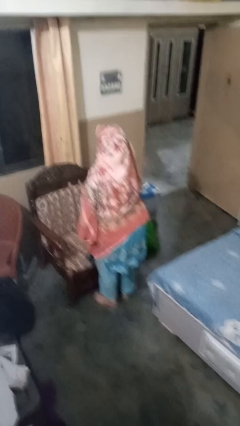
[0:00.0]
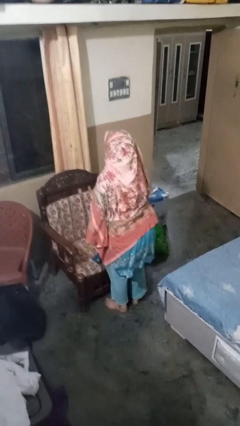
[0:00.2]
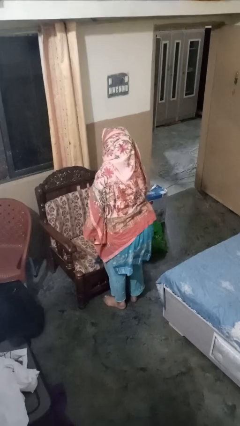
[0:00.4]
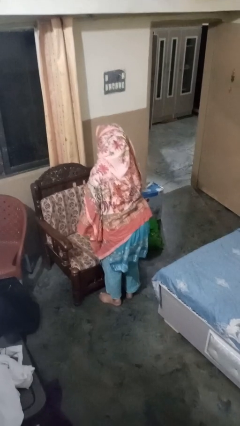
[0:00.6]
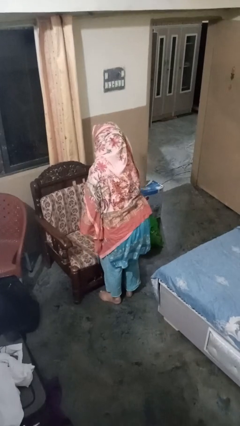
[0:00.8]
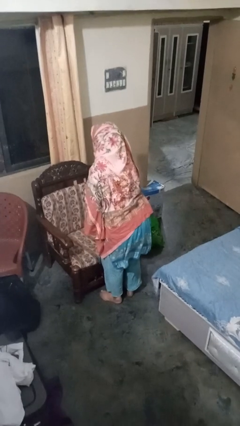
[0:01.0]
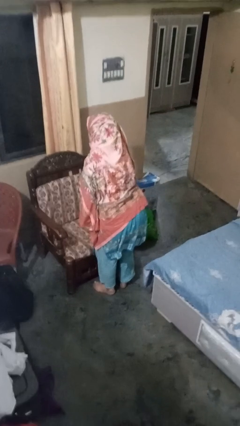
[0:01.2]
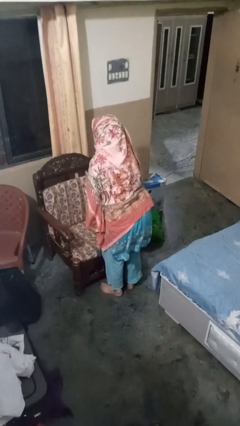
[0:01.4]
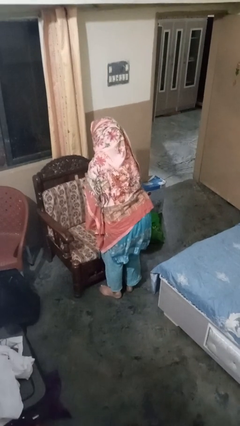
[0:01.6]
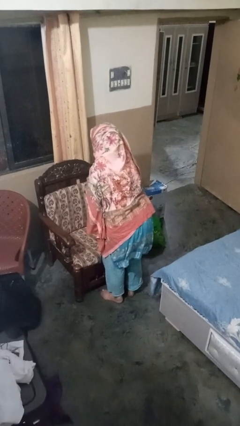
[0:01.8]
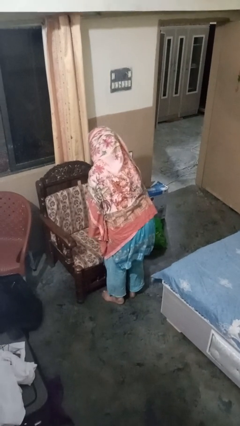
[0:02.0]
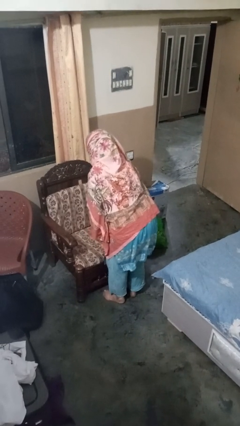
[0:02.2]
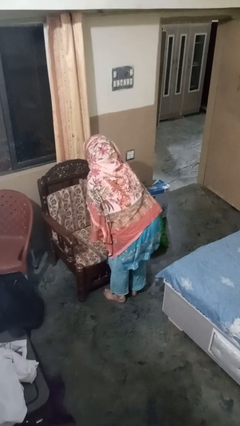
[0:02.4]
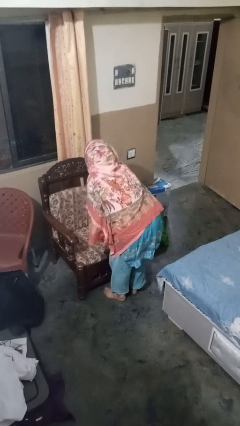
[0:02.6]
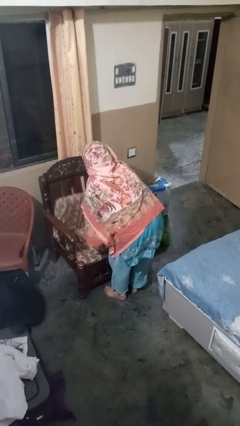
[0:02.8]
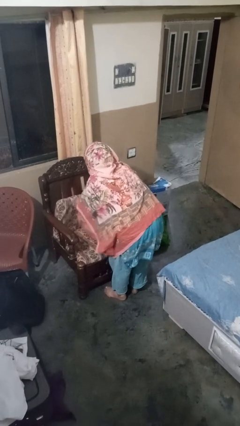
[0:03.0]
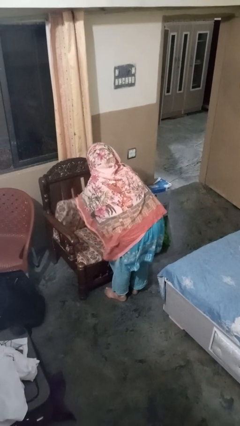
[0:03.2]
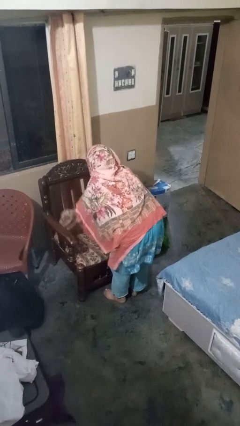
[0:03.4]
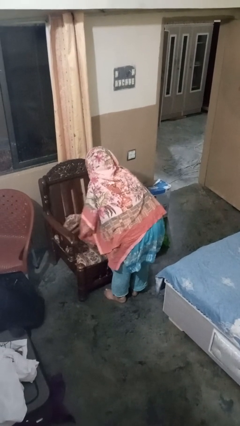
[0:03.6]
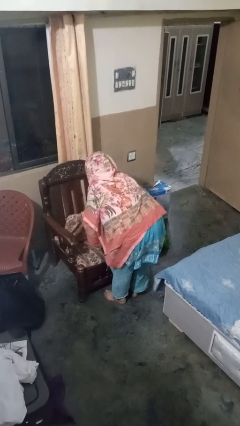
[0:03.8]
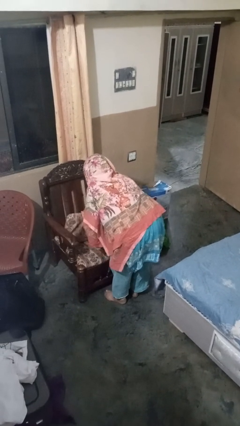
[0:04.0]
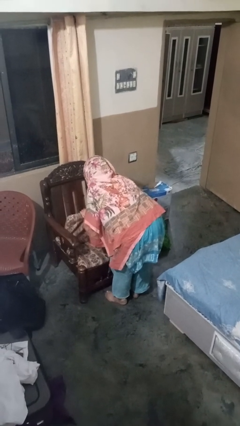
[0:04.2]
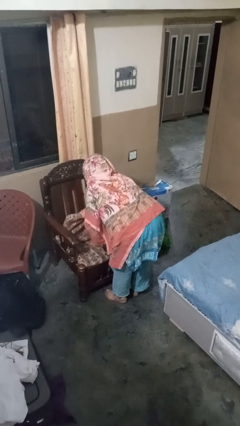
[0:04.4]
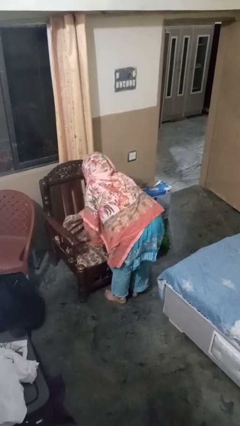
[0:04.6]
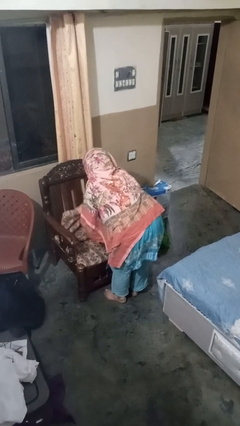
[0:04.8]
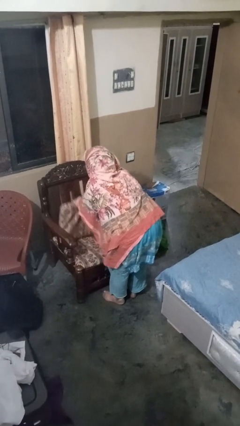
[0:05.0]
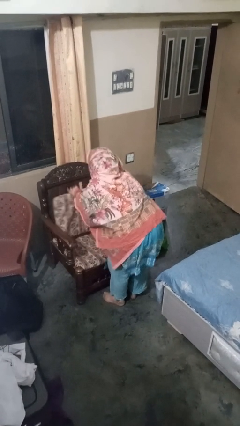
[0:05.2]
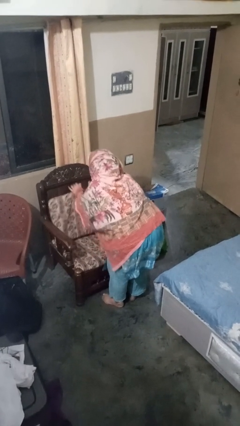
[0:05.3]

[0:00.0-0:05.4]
person searches in couch

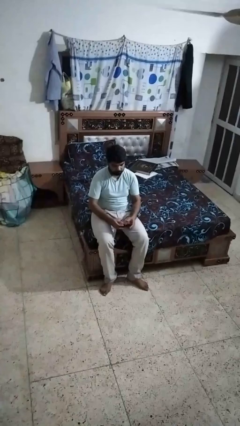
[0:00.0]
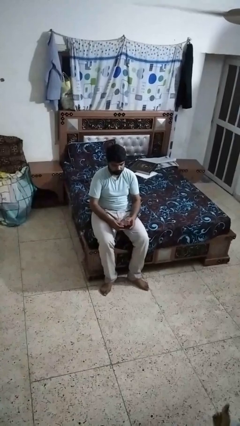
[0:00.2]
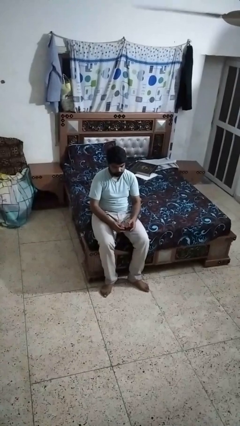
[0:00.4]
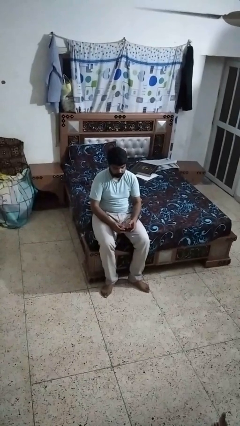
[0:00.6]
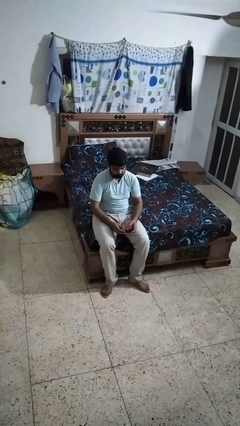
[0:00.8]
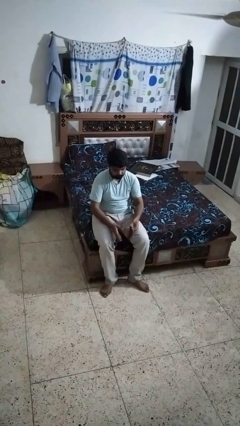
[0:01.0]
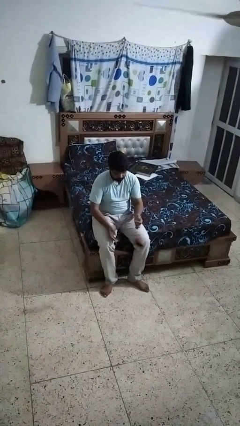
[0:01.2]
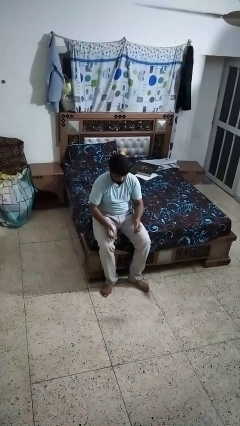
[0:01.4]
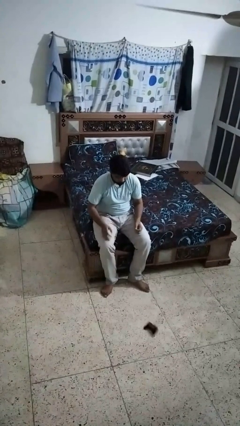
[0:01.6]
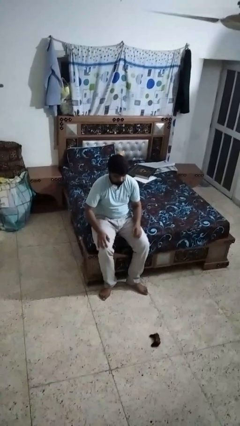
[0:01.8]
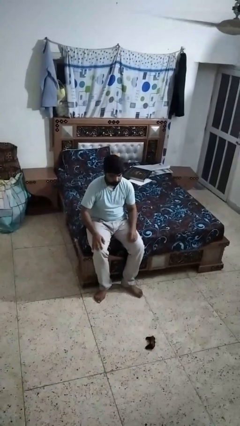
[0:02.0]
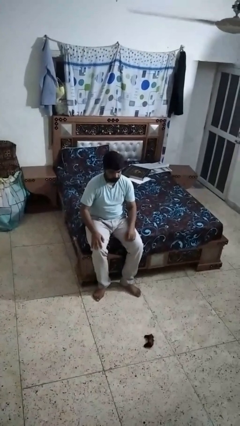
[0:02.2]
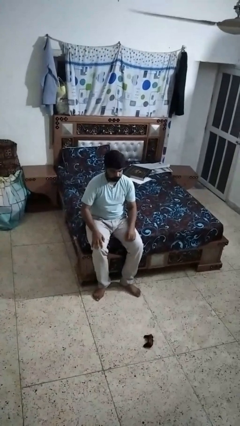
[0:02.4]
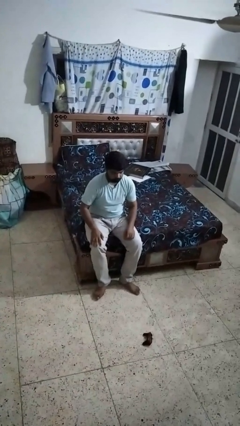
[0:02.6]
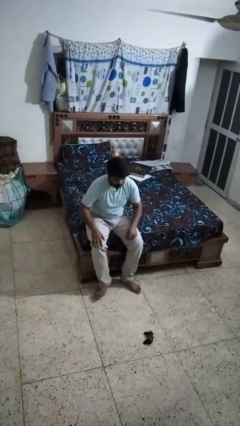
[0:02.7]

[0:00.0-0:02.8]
person drops object

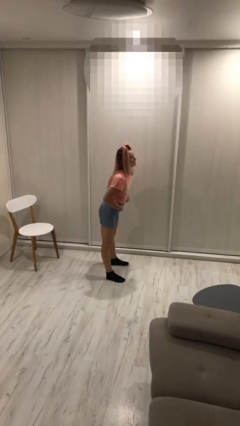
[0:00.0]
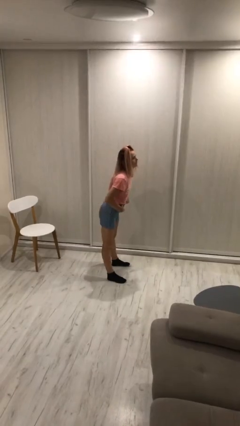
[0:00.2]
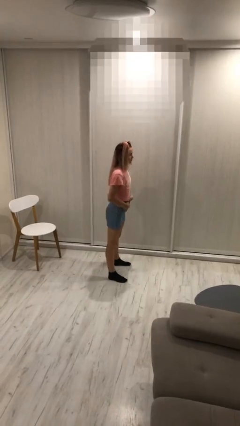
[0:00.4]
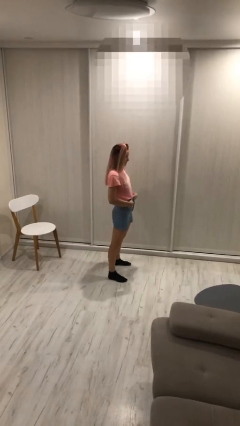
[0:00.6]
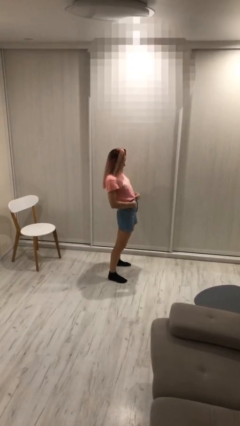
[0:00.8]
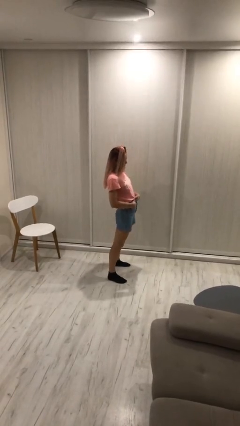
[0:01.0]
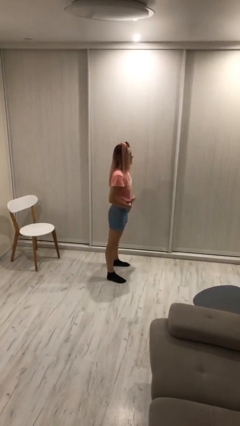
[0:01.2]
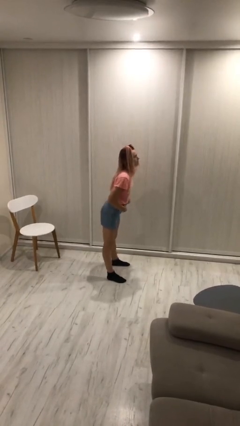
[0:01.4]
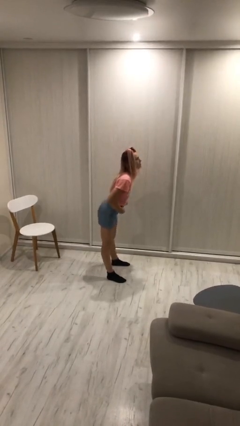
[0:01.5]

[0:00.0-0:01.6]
person wiggles hips

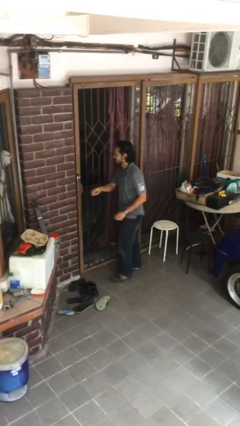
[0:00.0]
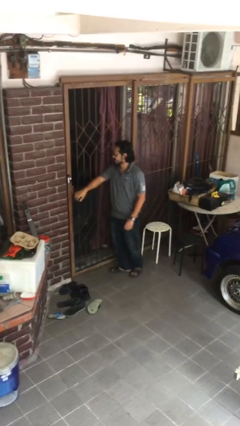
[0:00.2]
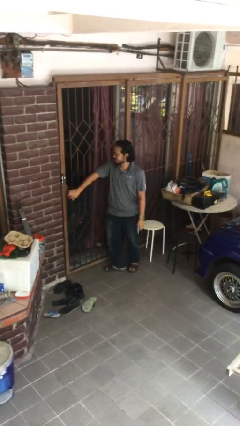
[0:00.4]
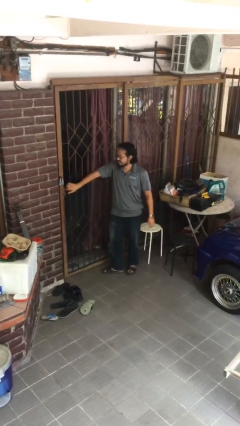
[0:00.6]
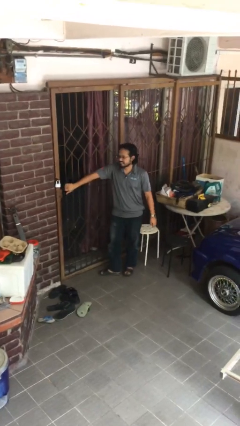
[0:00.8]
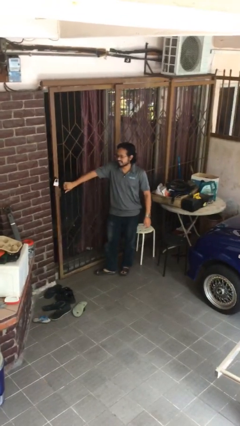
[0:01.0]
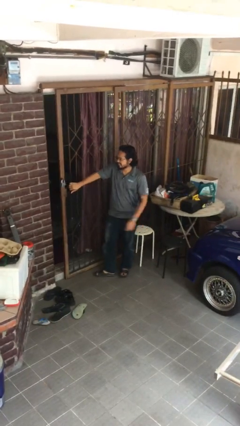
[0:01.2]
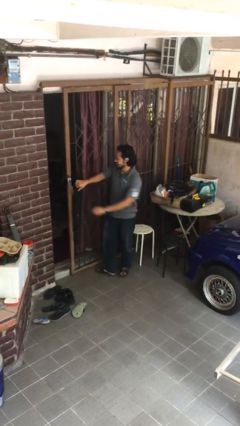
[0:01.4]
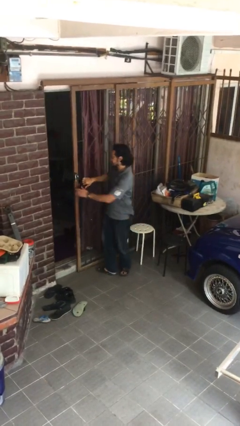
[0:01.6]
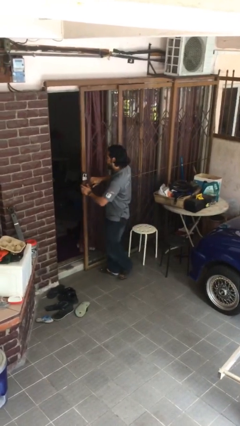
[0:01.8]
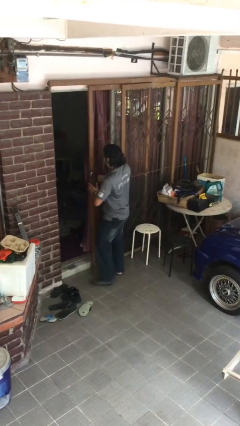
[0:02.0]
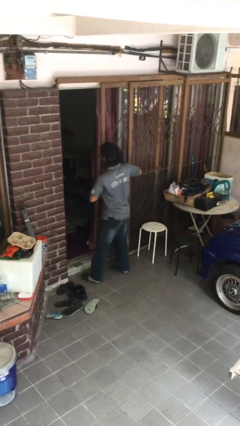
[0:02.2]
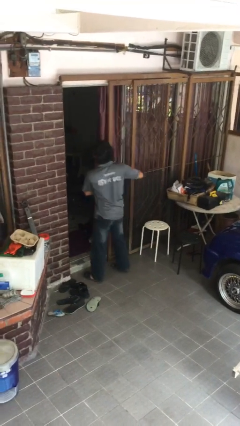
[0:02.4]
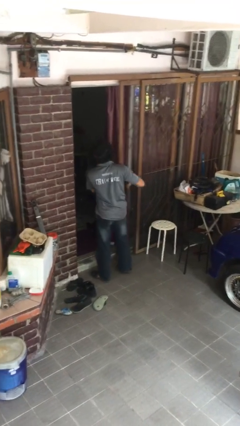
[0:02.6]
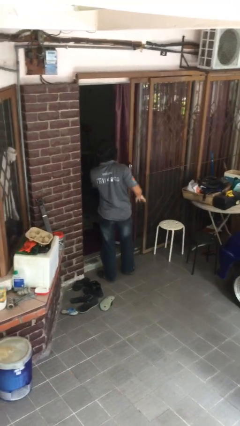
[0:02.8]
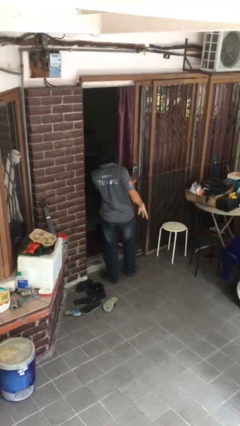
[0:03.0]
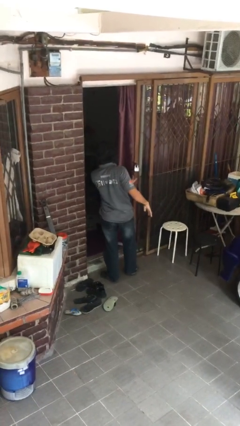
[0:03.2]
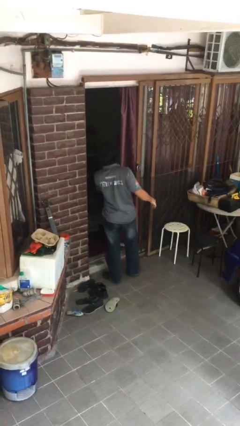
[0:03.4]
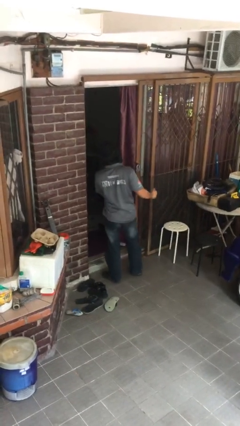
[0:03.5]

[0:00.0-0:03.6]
person opens facility door

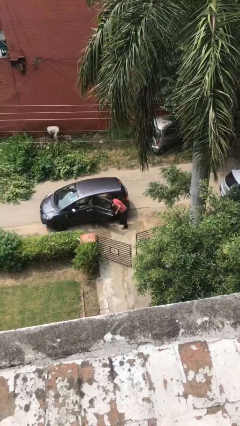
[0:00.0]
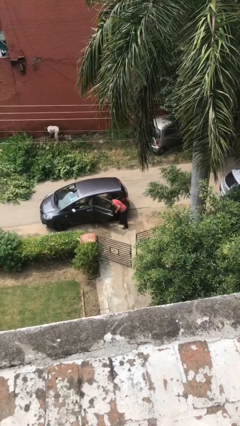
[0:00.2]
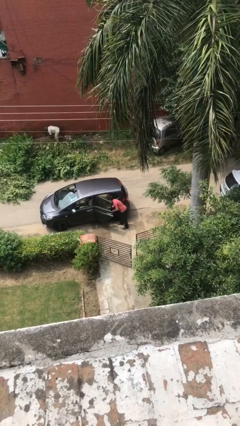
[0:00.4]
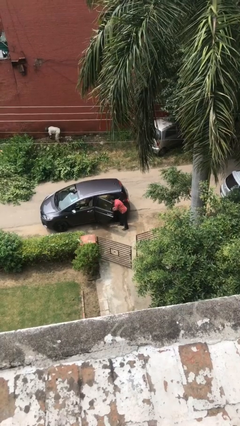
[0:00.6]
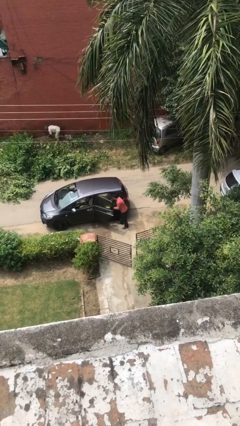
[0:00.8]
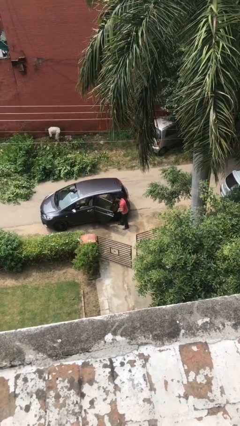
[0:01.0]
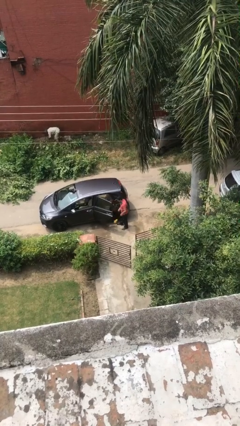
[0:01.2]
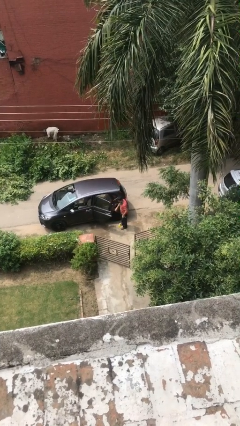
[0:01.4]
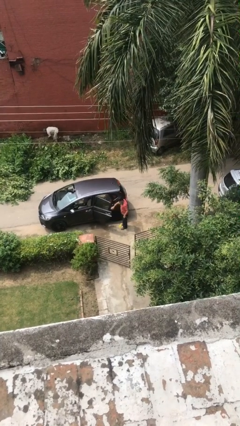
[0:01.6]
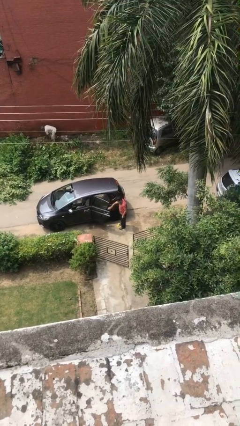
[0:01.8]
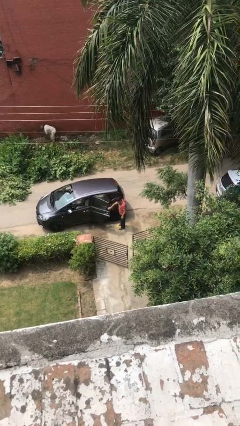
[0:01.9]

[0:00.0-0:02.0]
person unloads car

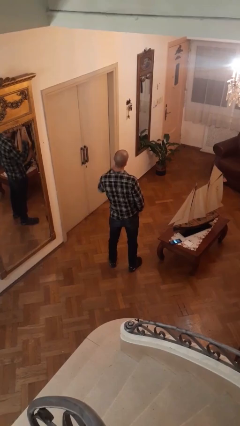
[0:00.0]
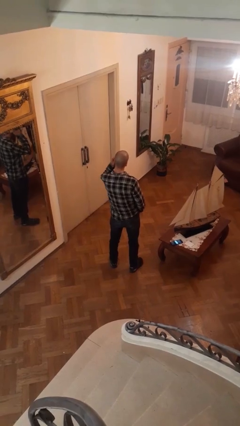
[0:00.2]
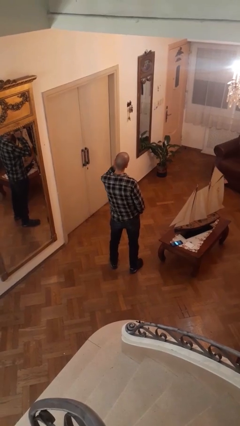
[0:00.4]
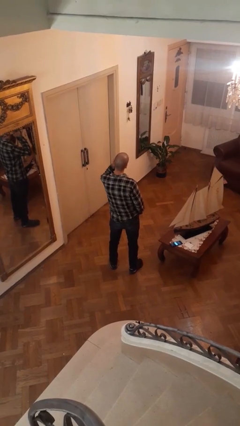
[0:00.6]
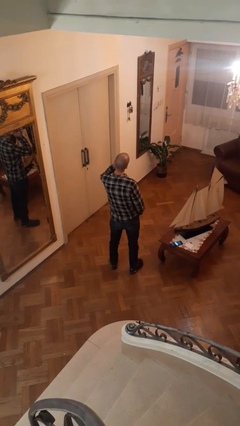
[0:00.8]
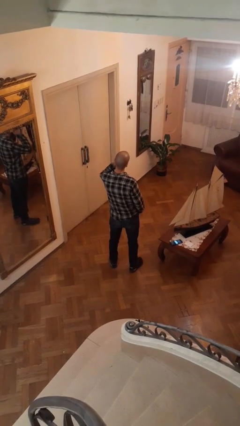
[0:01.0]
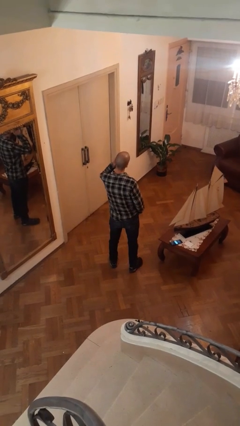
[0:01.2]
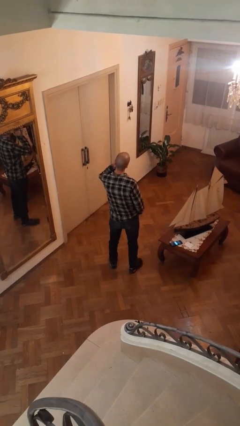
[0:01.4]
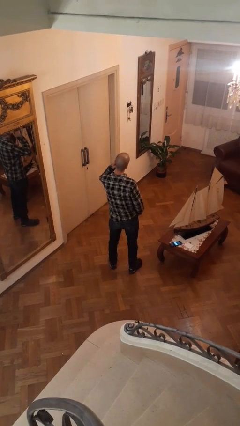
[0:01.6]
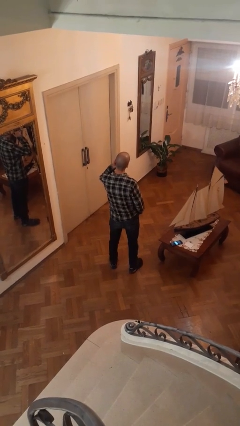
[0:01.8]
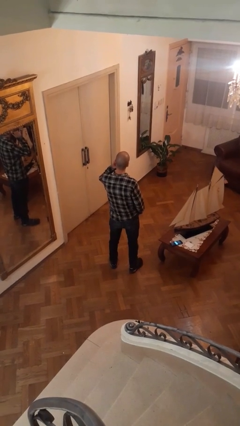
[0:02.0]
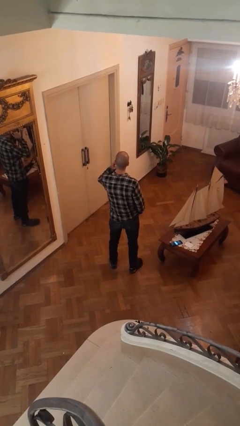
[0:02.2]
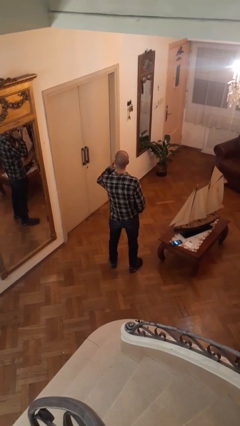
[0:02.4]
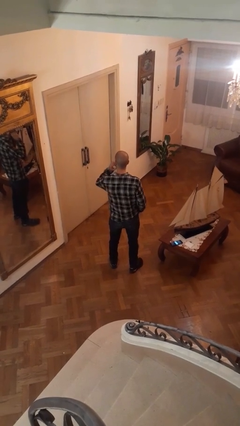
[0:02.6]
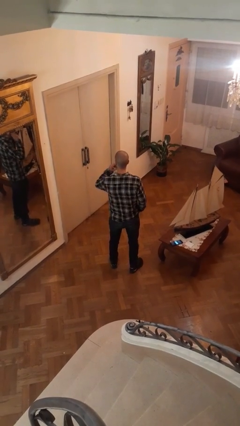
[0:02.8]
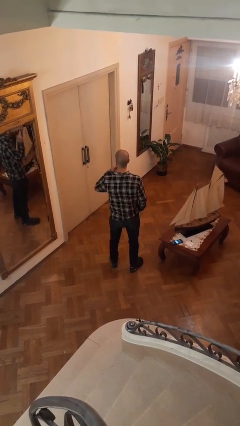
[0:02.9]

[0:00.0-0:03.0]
person scratches face
